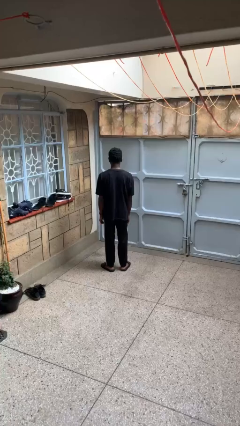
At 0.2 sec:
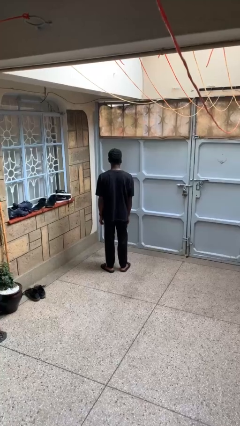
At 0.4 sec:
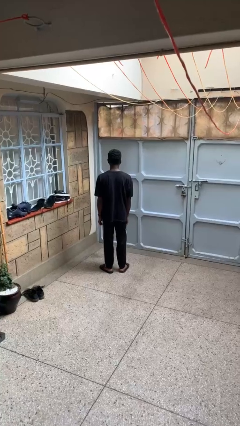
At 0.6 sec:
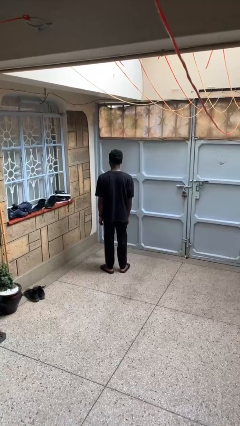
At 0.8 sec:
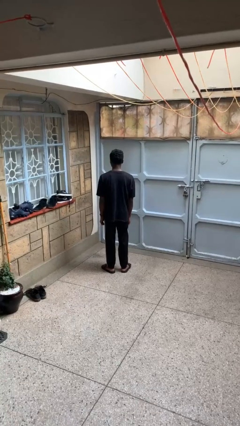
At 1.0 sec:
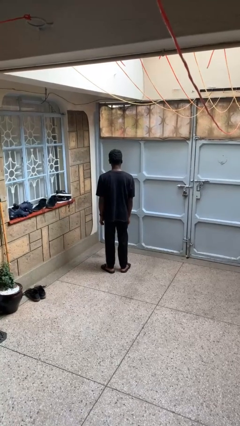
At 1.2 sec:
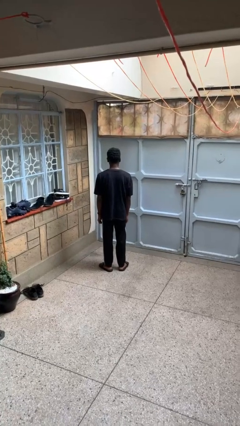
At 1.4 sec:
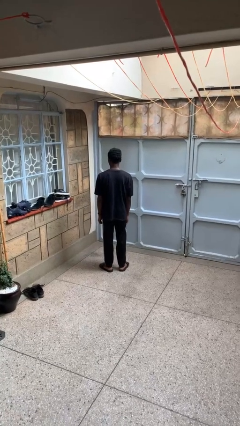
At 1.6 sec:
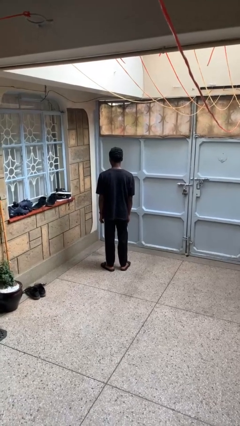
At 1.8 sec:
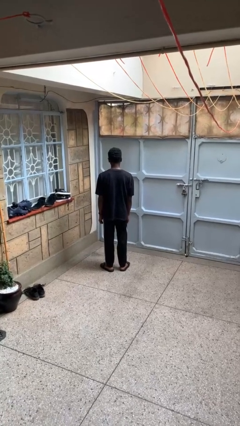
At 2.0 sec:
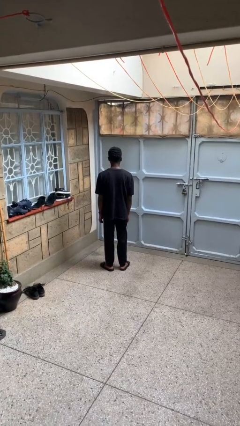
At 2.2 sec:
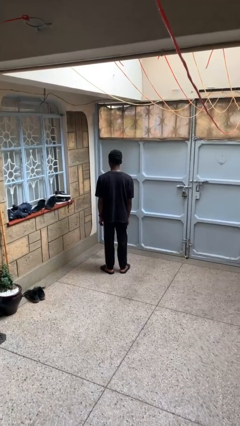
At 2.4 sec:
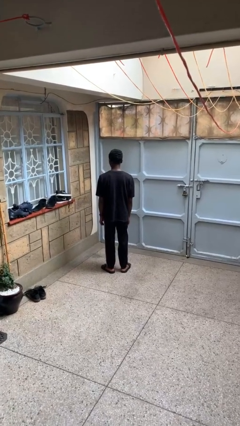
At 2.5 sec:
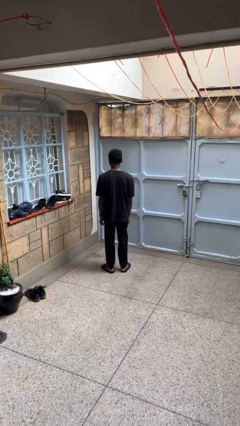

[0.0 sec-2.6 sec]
person shakes head

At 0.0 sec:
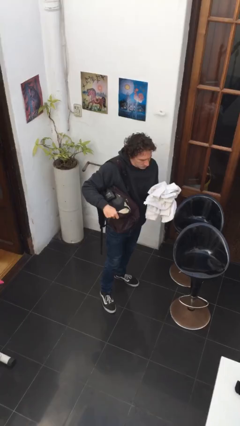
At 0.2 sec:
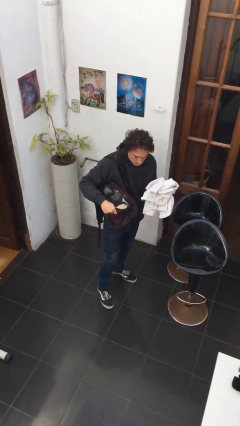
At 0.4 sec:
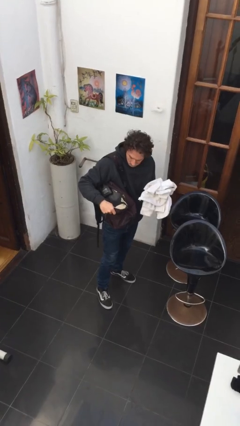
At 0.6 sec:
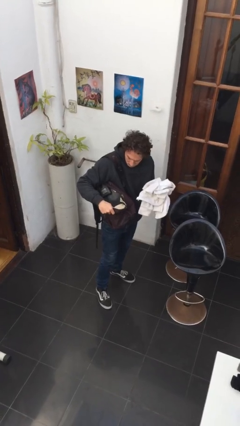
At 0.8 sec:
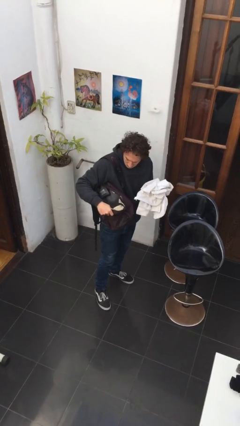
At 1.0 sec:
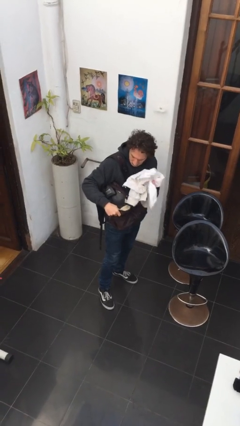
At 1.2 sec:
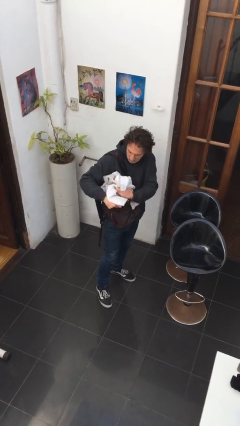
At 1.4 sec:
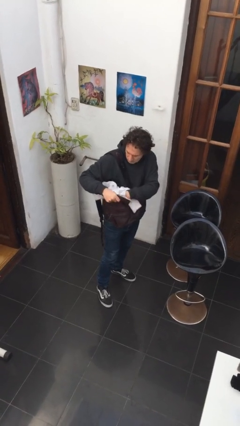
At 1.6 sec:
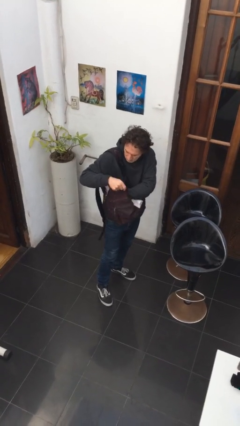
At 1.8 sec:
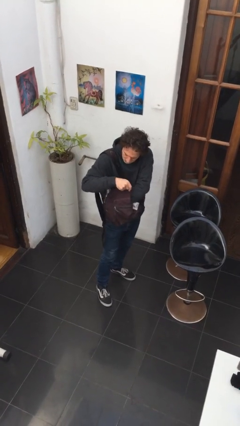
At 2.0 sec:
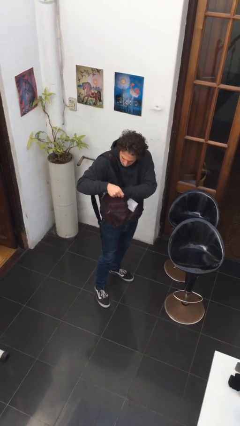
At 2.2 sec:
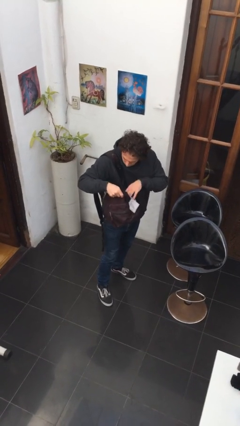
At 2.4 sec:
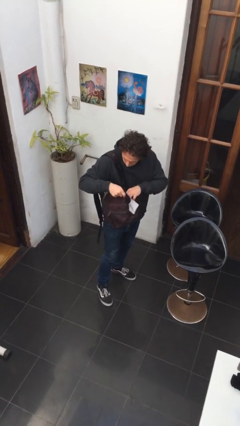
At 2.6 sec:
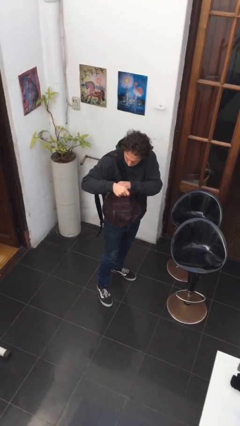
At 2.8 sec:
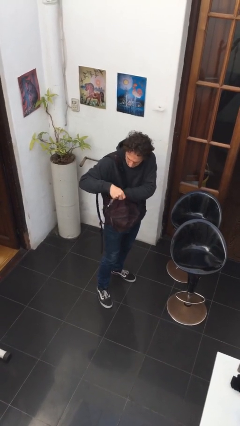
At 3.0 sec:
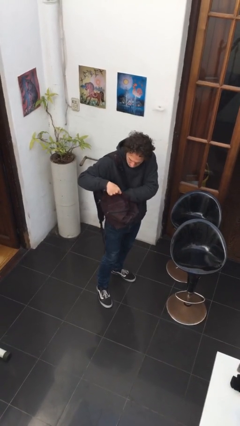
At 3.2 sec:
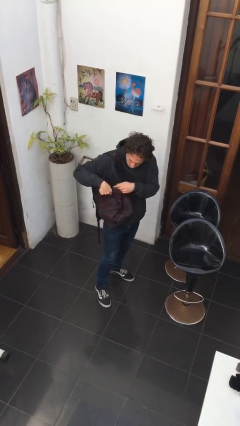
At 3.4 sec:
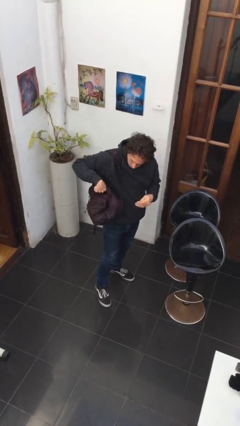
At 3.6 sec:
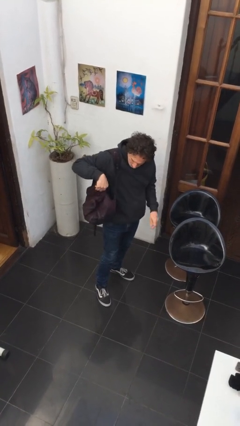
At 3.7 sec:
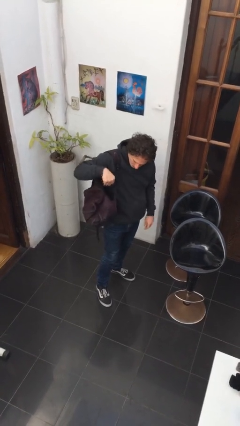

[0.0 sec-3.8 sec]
person puts object into backpack

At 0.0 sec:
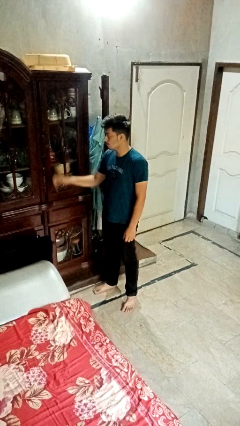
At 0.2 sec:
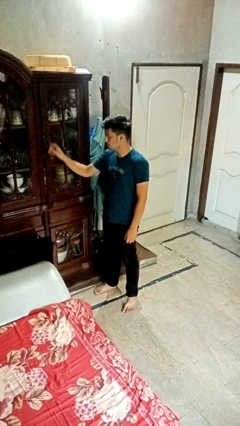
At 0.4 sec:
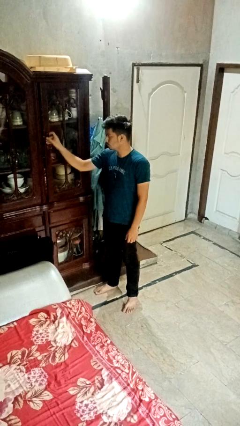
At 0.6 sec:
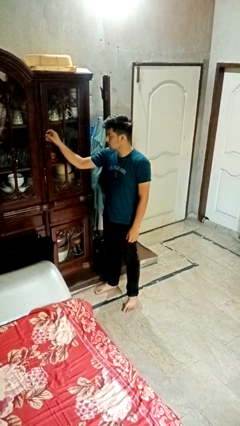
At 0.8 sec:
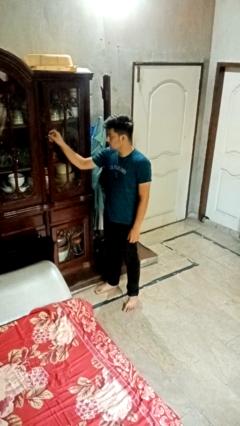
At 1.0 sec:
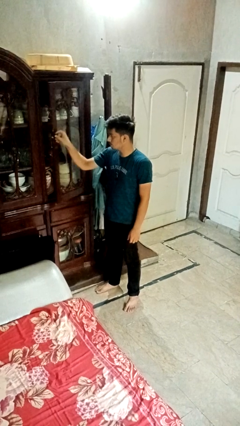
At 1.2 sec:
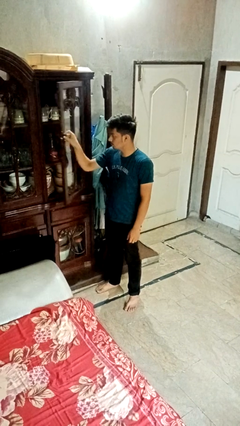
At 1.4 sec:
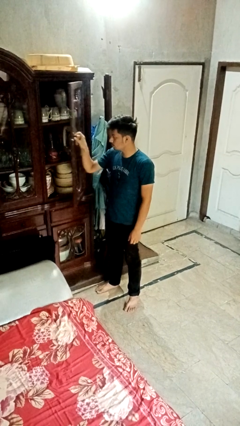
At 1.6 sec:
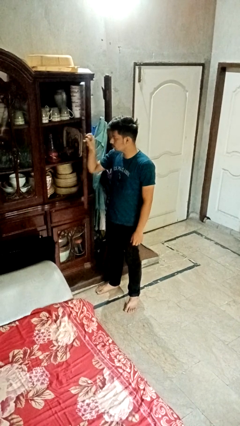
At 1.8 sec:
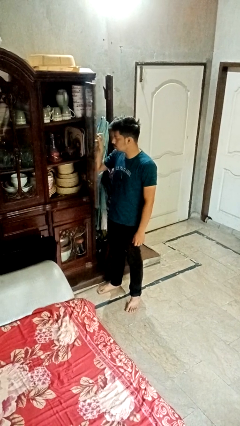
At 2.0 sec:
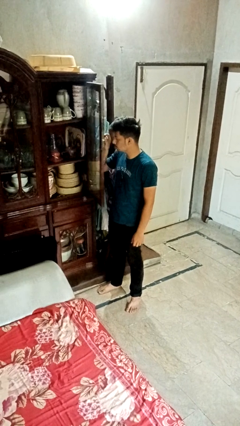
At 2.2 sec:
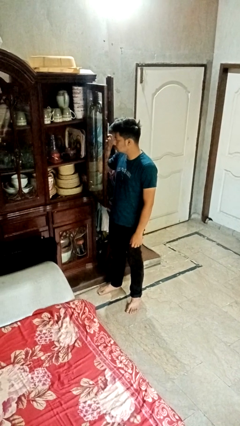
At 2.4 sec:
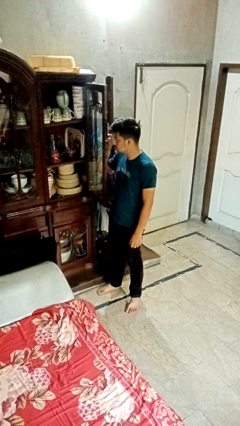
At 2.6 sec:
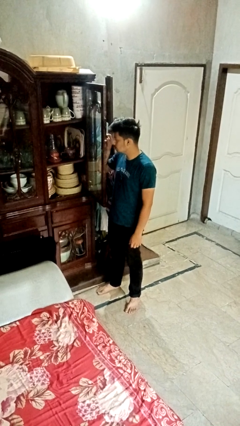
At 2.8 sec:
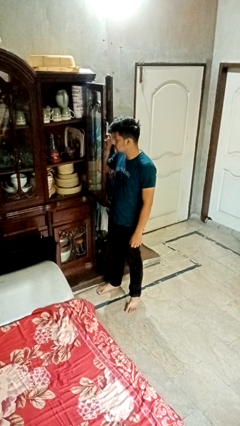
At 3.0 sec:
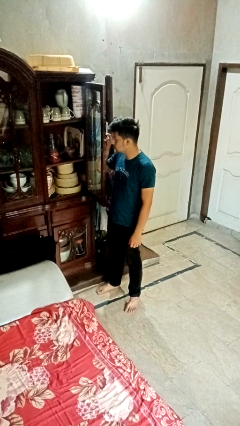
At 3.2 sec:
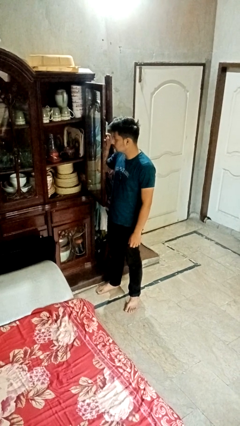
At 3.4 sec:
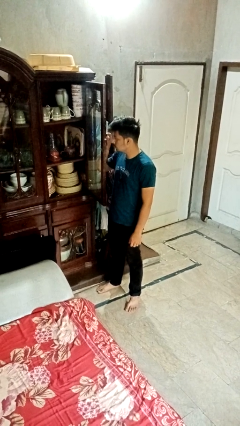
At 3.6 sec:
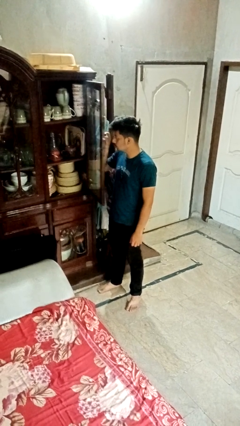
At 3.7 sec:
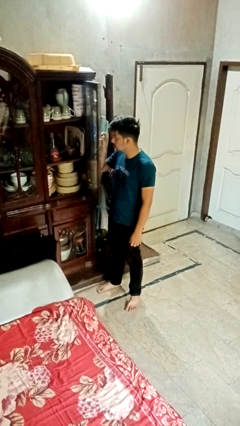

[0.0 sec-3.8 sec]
person opens cabinet

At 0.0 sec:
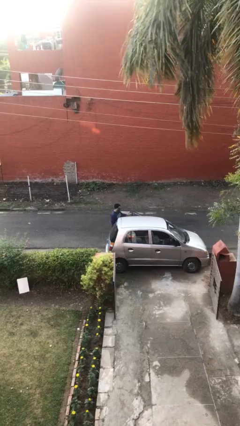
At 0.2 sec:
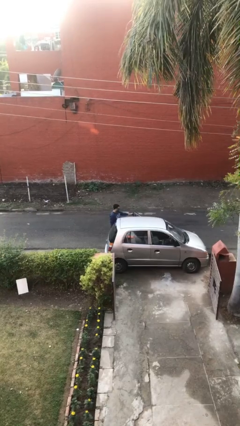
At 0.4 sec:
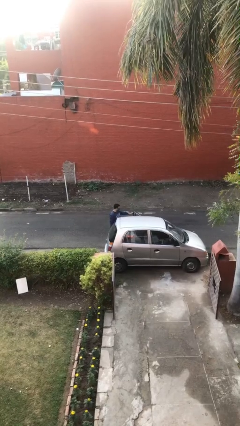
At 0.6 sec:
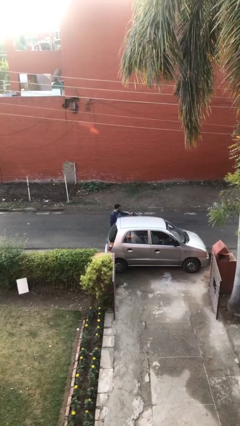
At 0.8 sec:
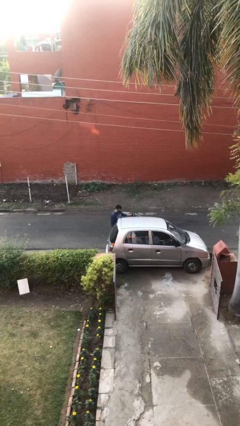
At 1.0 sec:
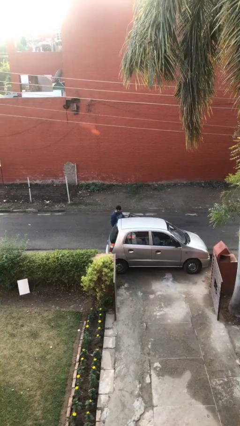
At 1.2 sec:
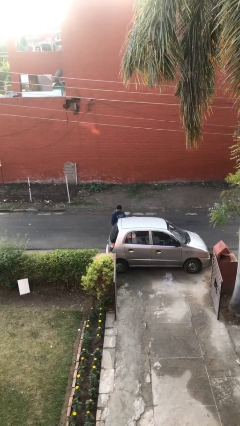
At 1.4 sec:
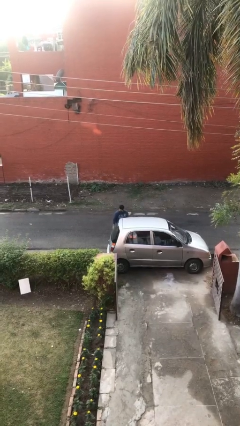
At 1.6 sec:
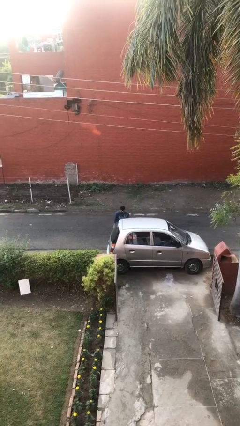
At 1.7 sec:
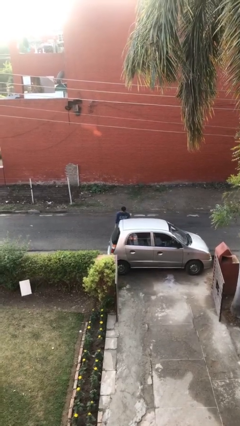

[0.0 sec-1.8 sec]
person closes car door

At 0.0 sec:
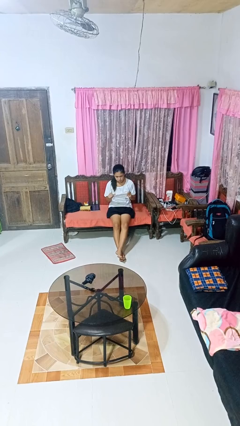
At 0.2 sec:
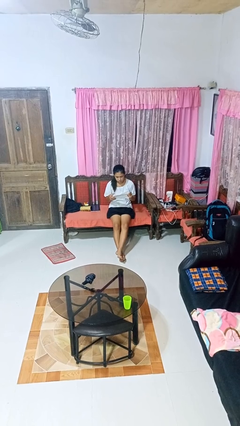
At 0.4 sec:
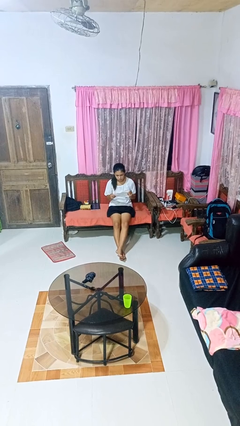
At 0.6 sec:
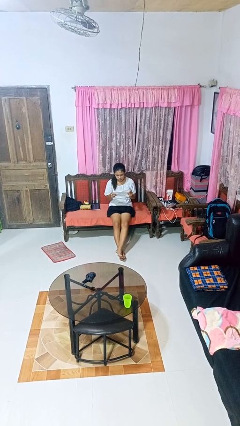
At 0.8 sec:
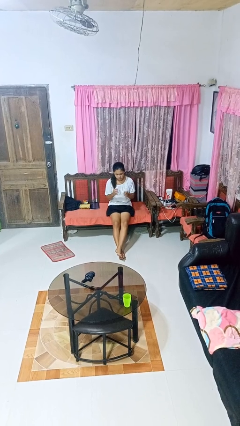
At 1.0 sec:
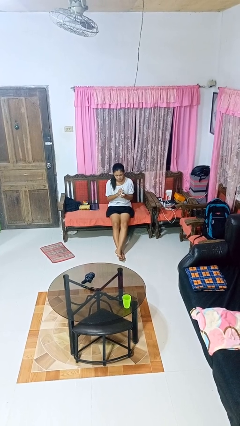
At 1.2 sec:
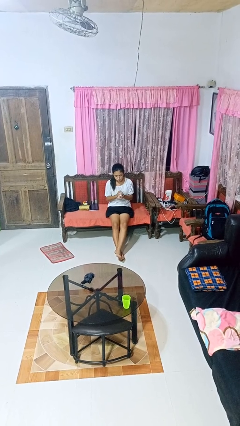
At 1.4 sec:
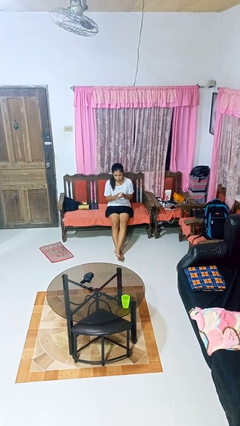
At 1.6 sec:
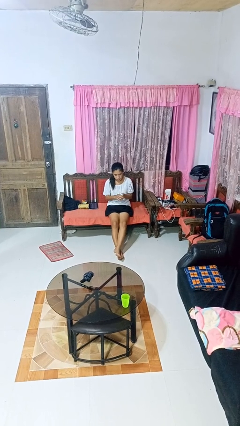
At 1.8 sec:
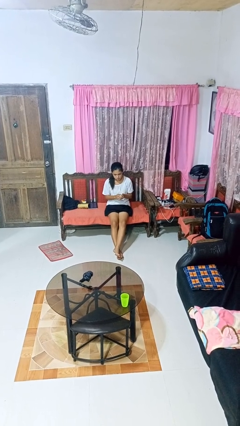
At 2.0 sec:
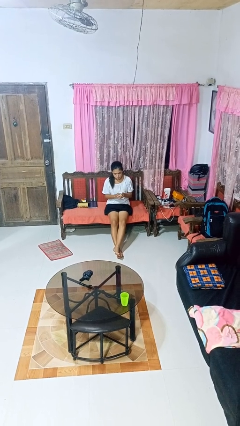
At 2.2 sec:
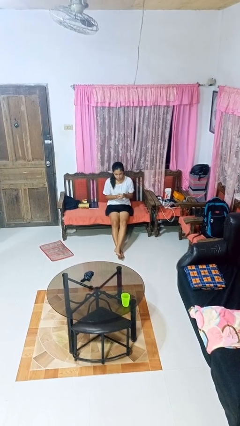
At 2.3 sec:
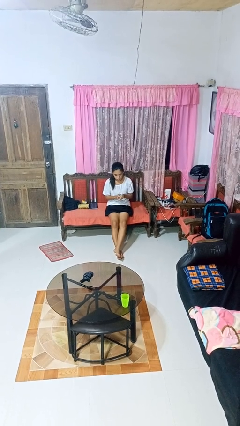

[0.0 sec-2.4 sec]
person crumples paper

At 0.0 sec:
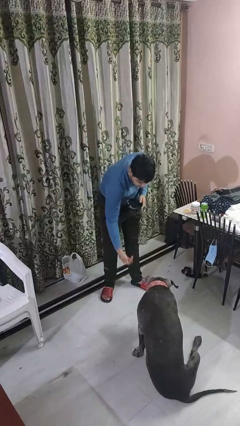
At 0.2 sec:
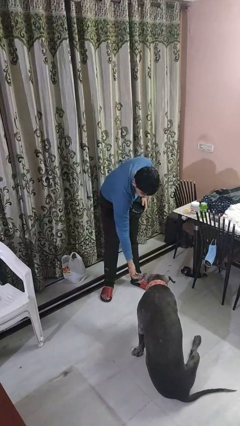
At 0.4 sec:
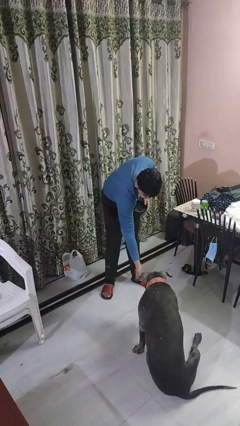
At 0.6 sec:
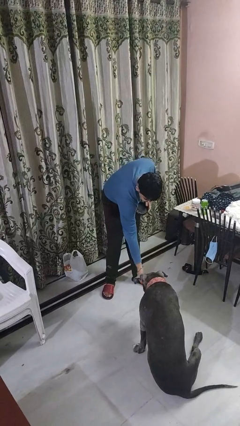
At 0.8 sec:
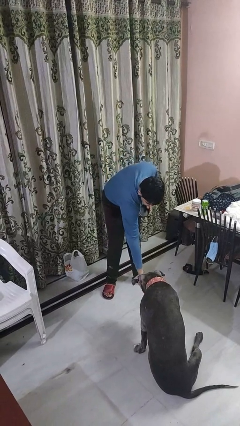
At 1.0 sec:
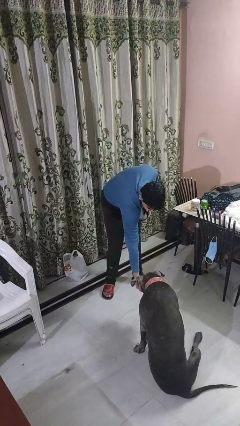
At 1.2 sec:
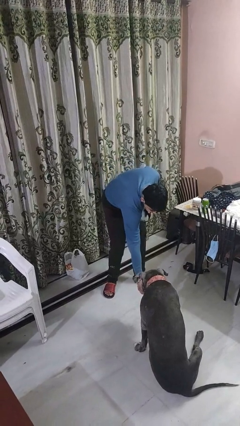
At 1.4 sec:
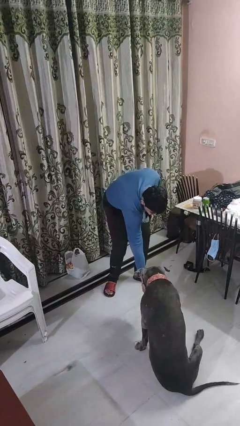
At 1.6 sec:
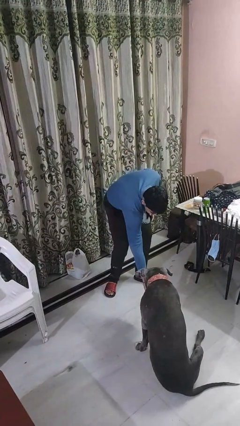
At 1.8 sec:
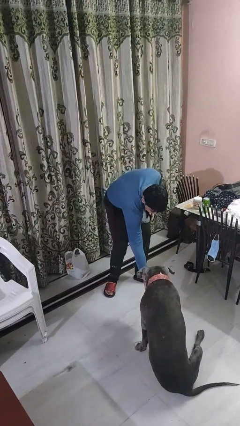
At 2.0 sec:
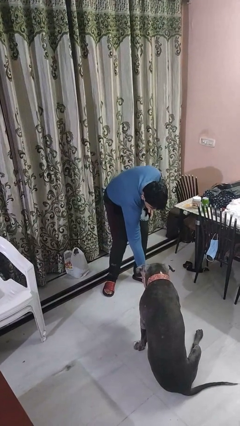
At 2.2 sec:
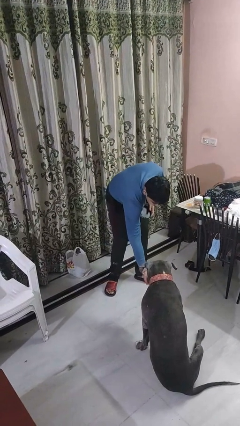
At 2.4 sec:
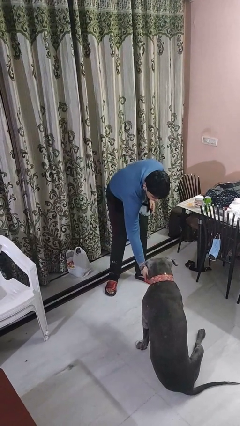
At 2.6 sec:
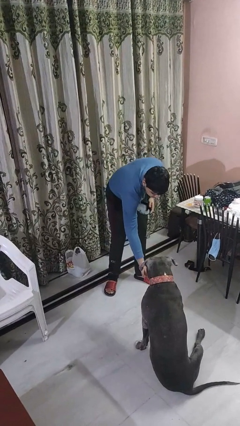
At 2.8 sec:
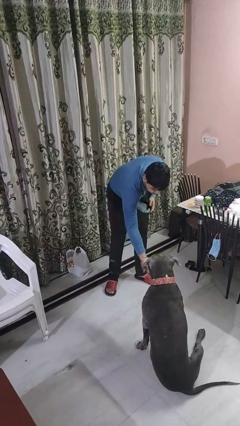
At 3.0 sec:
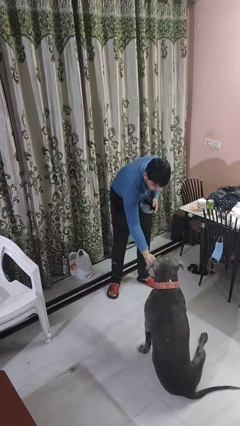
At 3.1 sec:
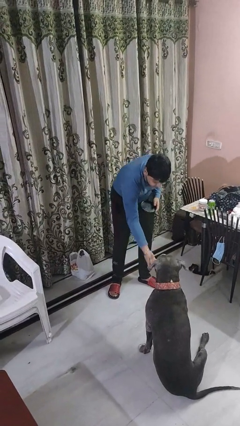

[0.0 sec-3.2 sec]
person feeds dog
